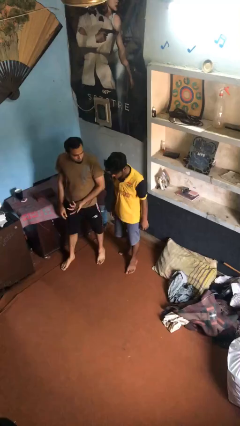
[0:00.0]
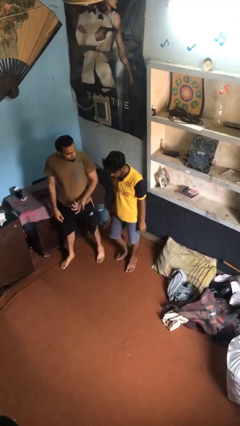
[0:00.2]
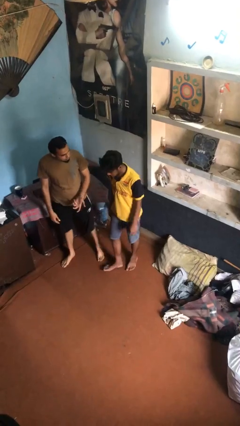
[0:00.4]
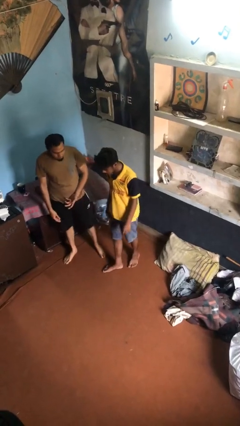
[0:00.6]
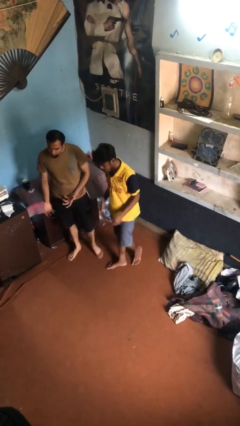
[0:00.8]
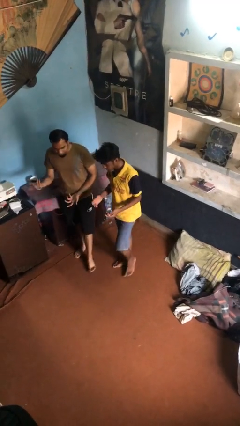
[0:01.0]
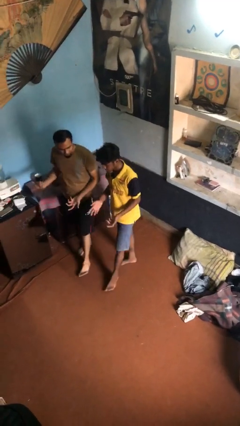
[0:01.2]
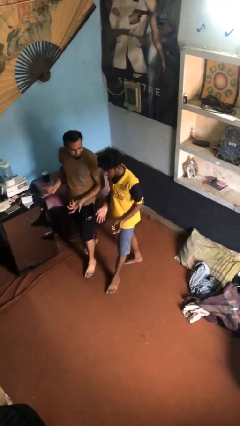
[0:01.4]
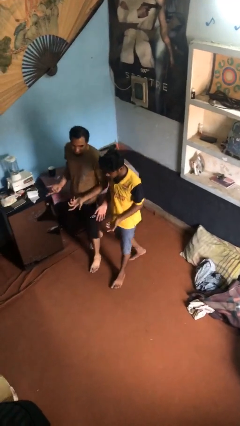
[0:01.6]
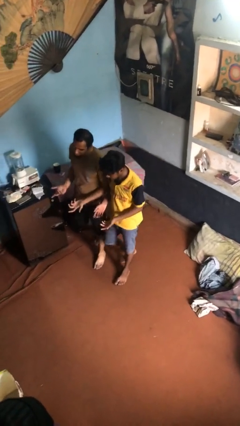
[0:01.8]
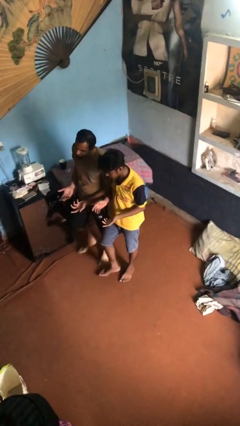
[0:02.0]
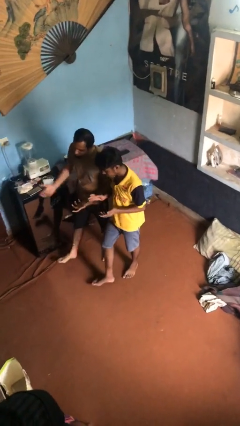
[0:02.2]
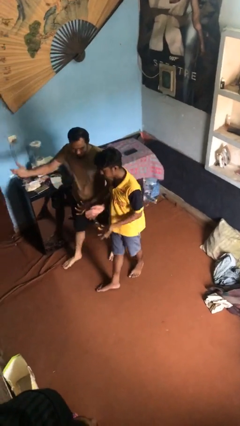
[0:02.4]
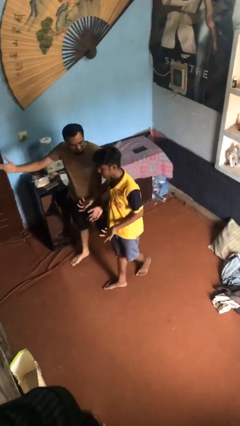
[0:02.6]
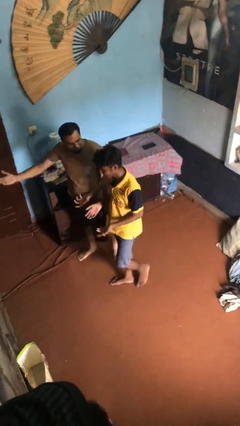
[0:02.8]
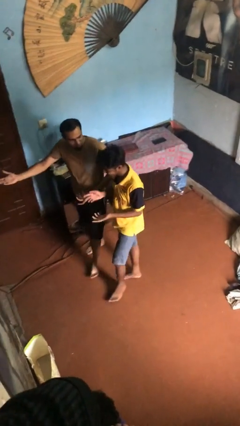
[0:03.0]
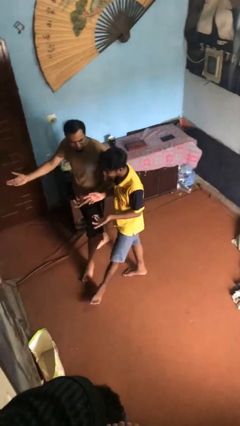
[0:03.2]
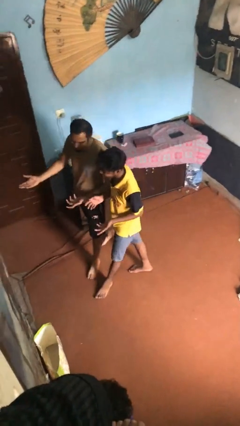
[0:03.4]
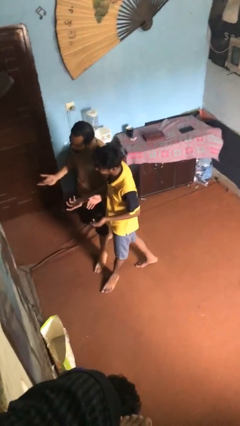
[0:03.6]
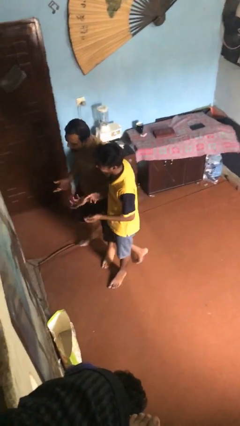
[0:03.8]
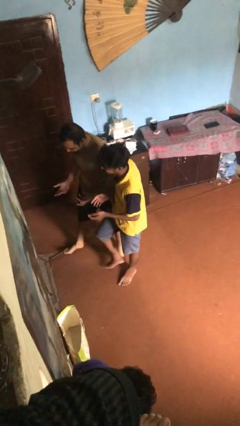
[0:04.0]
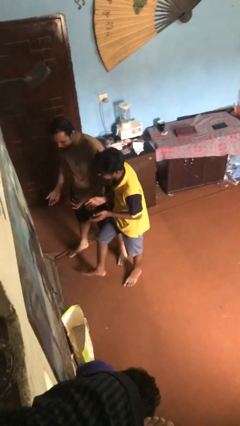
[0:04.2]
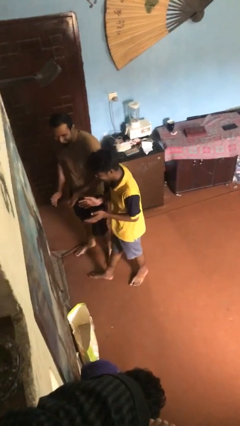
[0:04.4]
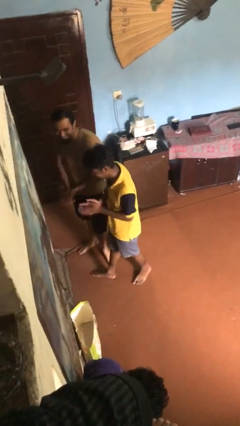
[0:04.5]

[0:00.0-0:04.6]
person talks to person

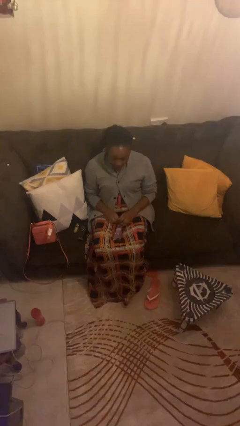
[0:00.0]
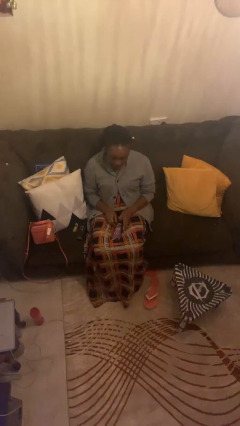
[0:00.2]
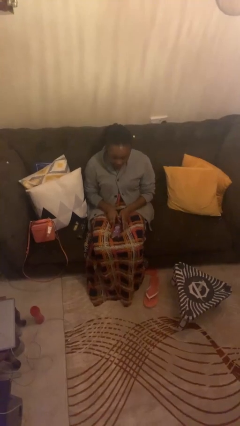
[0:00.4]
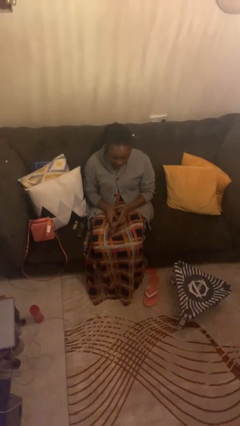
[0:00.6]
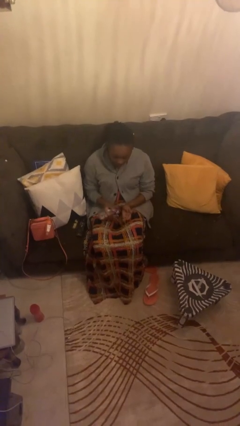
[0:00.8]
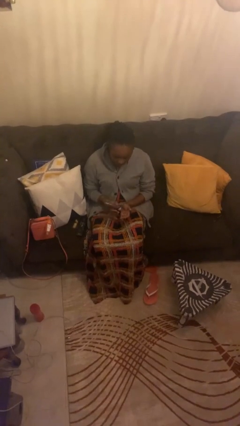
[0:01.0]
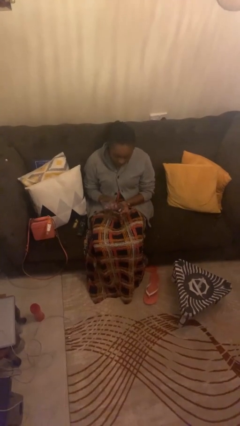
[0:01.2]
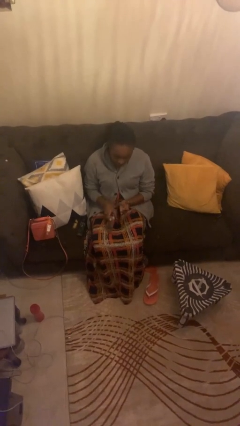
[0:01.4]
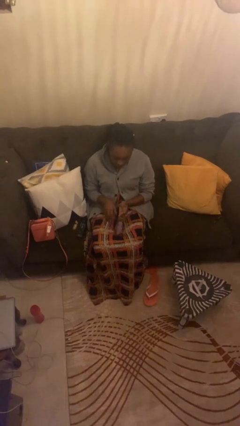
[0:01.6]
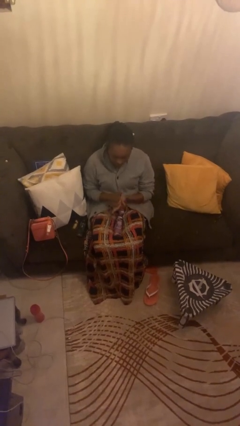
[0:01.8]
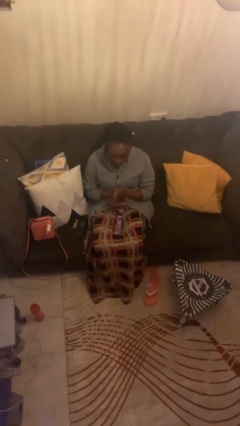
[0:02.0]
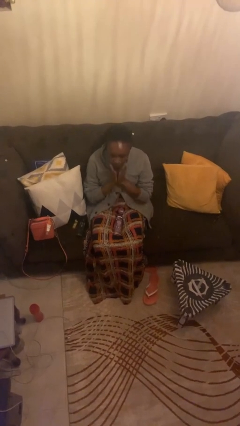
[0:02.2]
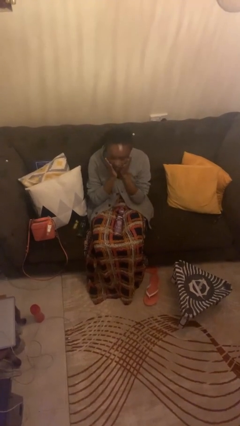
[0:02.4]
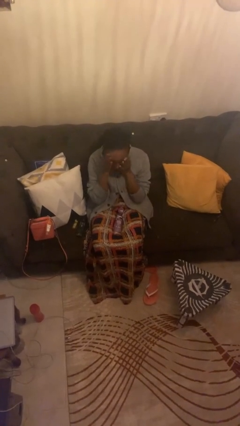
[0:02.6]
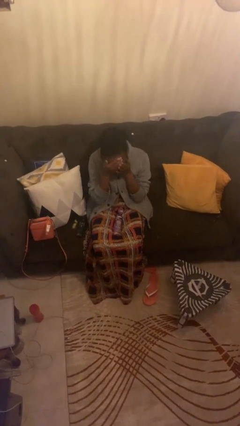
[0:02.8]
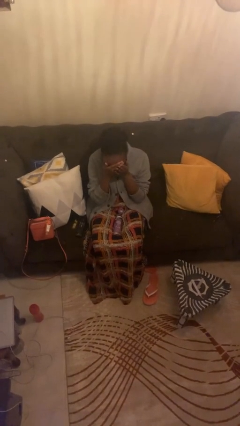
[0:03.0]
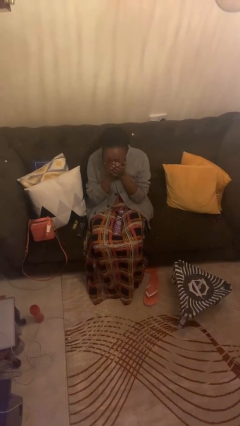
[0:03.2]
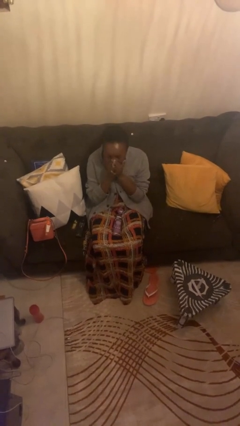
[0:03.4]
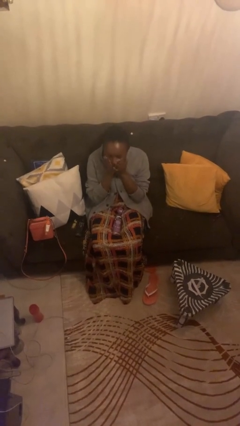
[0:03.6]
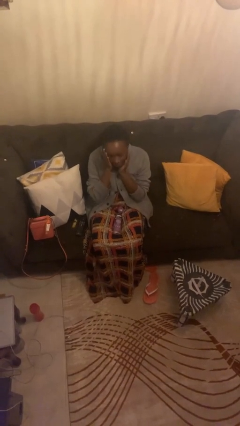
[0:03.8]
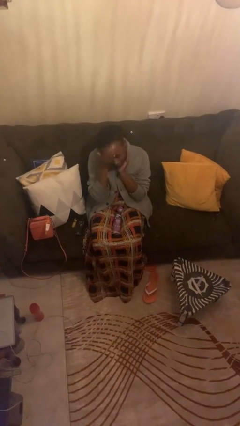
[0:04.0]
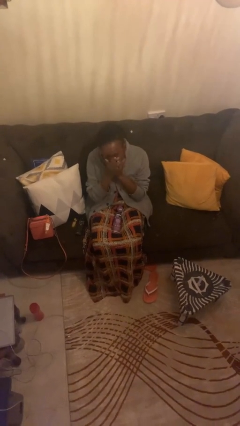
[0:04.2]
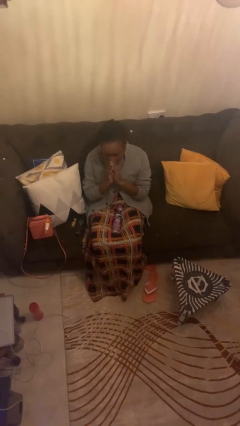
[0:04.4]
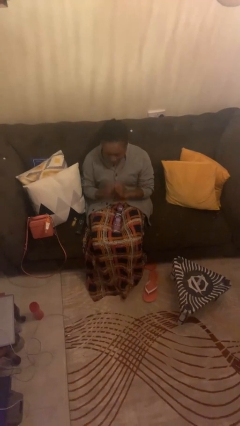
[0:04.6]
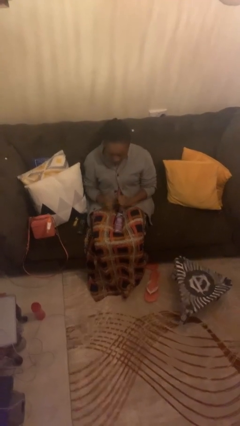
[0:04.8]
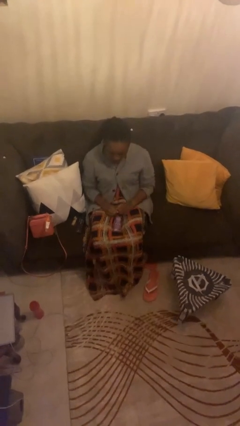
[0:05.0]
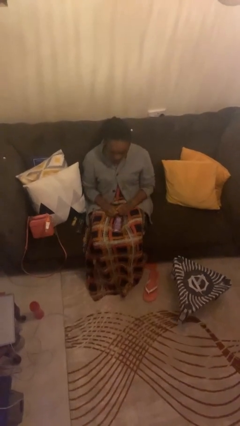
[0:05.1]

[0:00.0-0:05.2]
person applies facial moisturizer

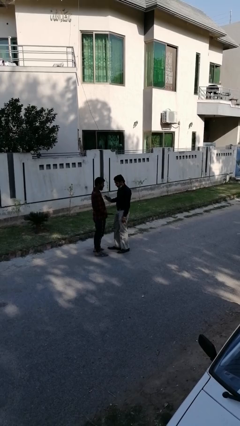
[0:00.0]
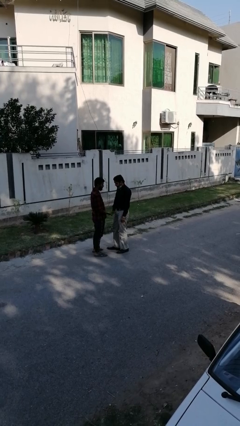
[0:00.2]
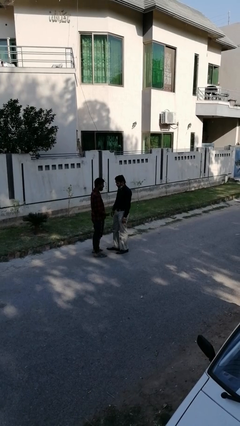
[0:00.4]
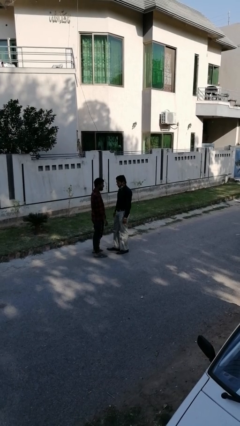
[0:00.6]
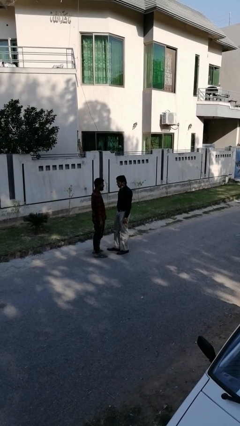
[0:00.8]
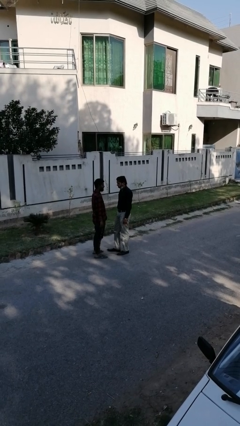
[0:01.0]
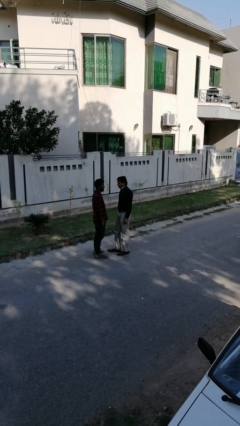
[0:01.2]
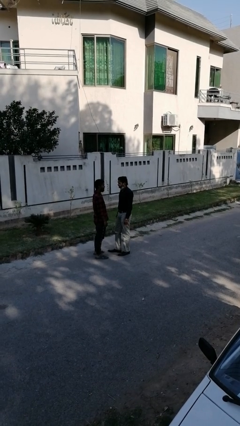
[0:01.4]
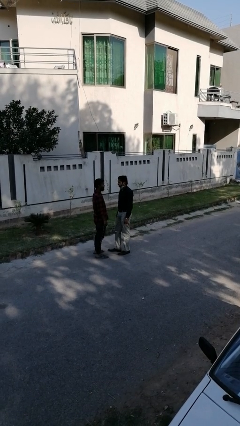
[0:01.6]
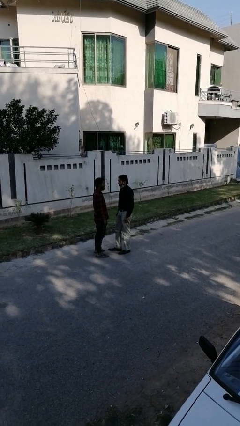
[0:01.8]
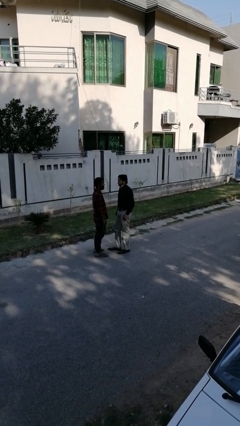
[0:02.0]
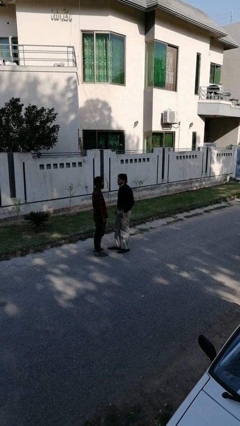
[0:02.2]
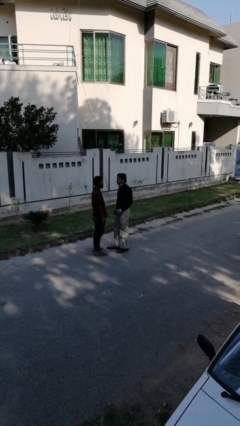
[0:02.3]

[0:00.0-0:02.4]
person highfives hand

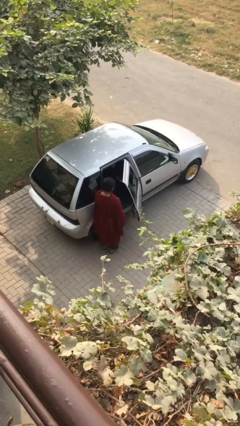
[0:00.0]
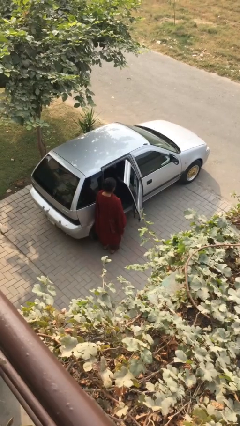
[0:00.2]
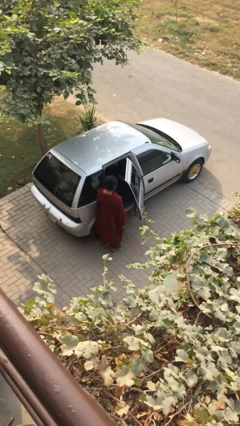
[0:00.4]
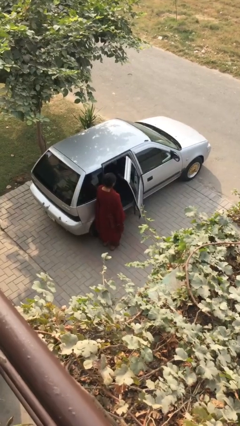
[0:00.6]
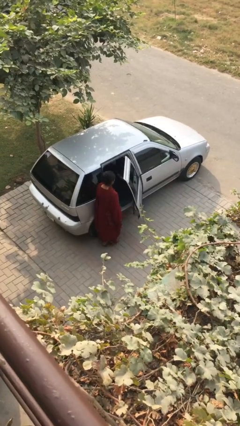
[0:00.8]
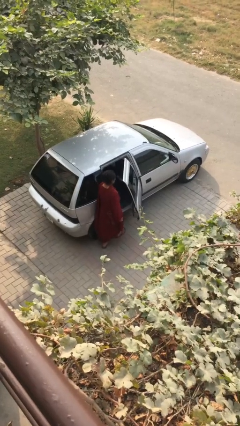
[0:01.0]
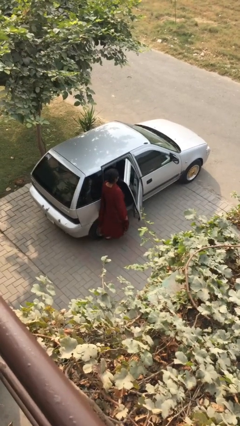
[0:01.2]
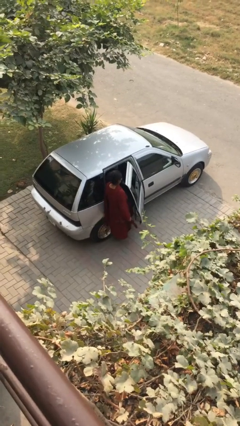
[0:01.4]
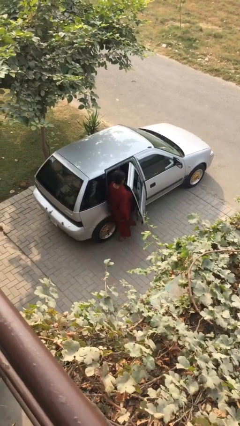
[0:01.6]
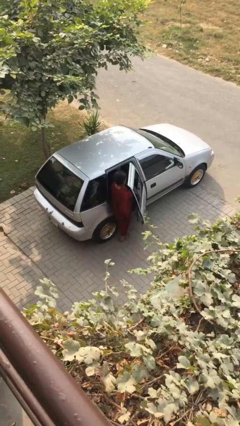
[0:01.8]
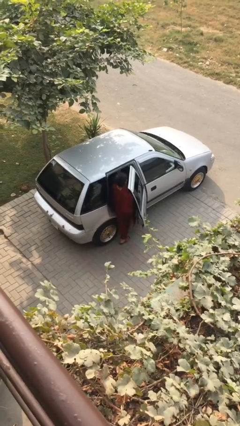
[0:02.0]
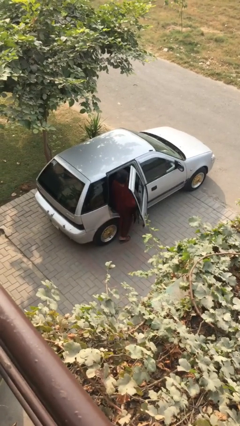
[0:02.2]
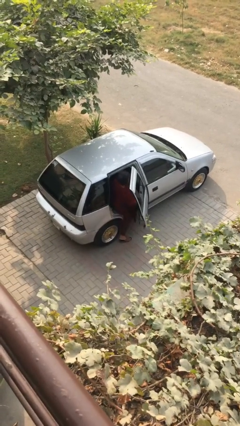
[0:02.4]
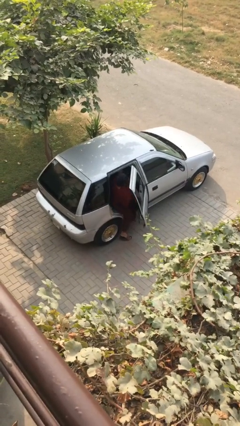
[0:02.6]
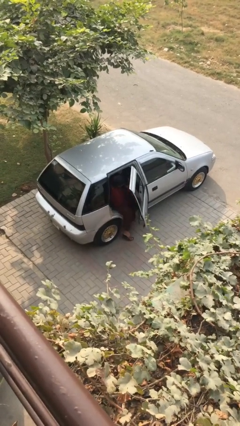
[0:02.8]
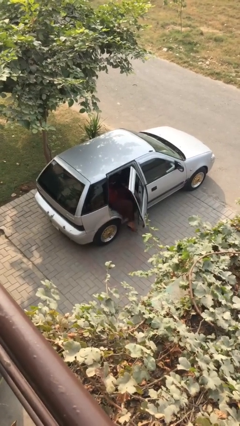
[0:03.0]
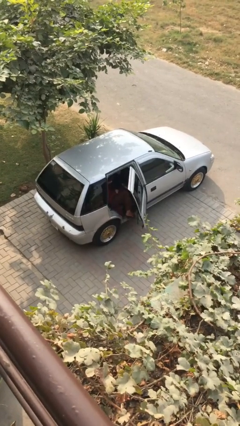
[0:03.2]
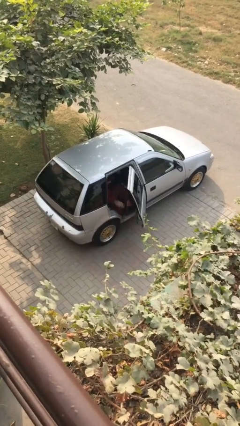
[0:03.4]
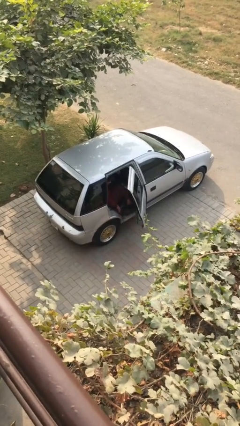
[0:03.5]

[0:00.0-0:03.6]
person enters car

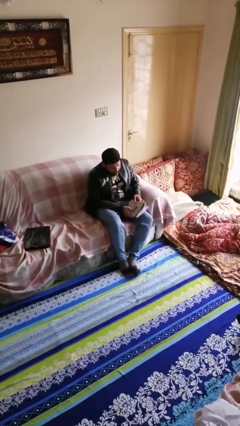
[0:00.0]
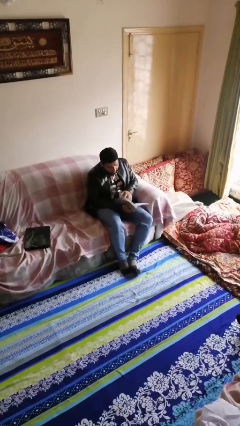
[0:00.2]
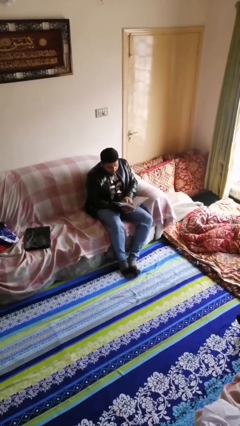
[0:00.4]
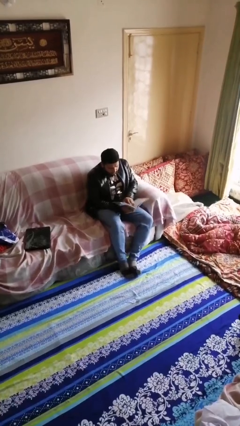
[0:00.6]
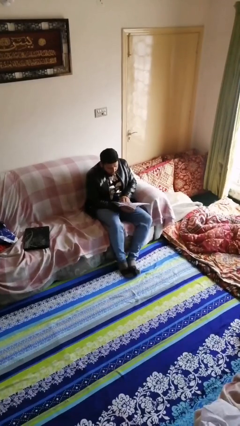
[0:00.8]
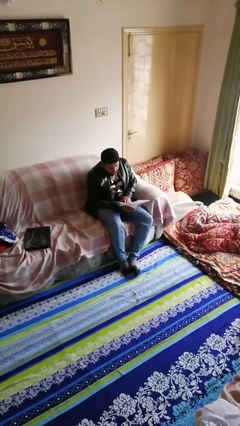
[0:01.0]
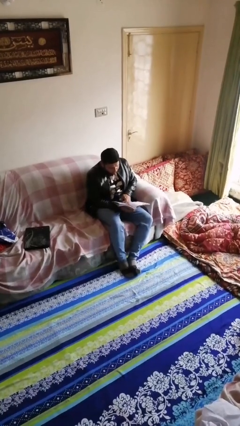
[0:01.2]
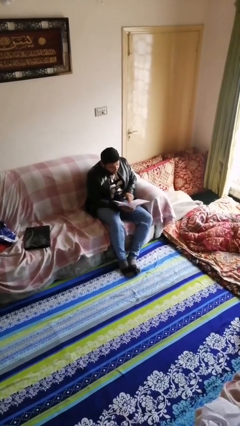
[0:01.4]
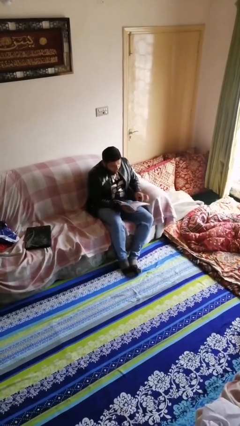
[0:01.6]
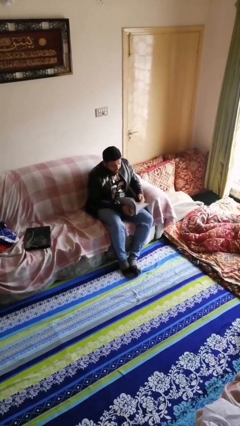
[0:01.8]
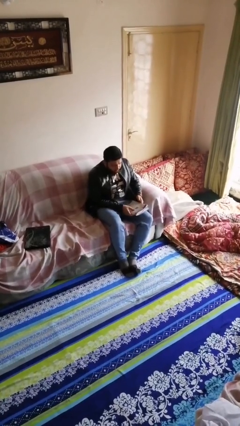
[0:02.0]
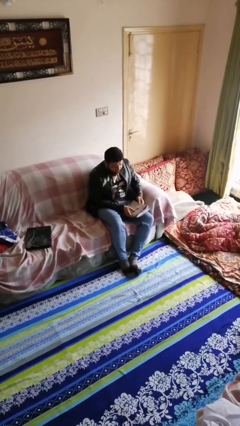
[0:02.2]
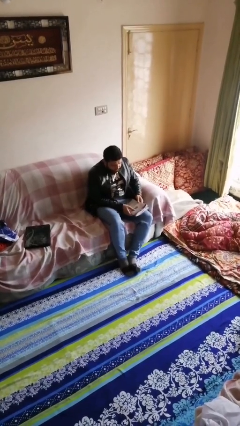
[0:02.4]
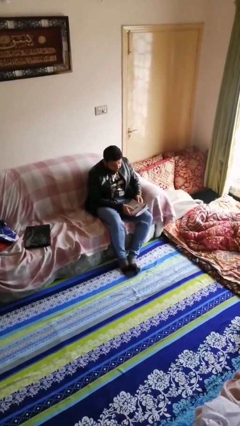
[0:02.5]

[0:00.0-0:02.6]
person reads document
